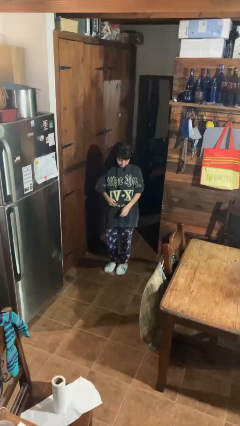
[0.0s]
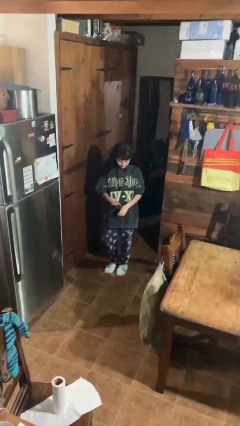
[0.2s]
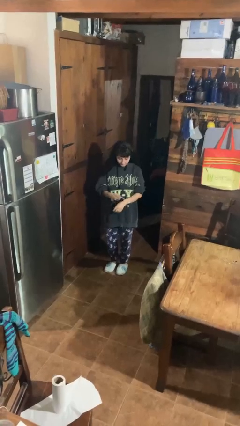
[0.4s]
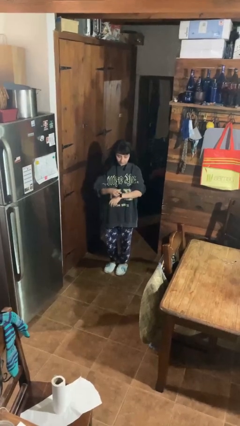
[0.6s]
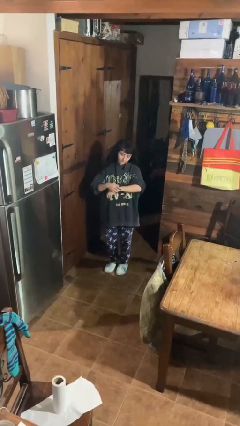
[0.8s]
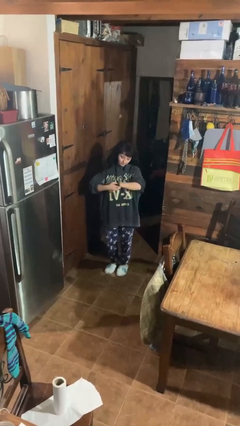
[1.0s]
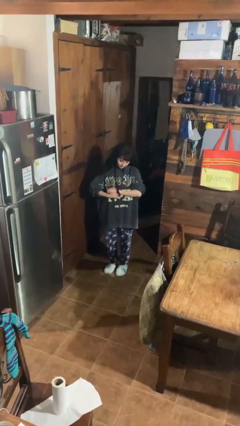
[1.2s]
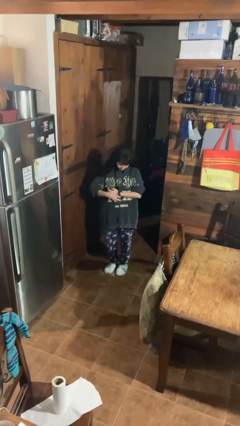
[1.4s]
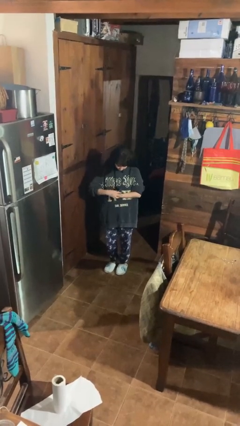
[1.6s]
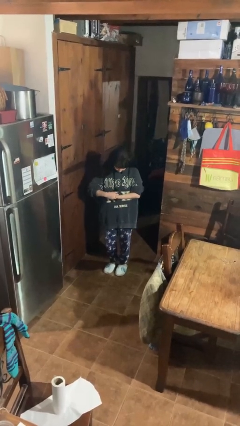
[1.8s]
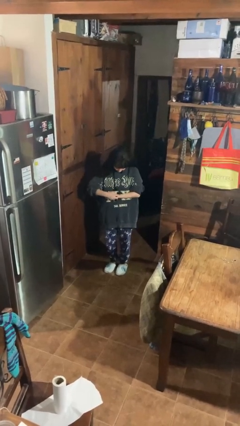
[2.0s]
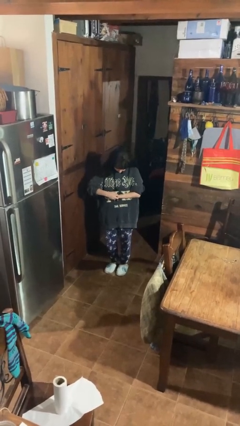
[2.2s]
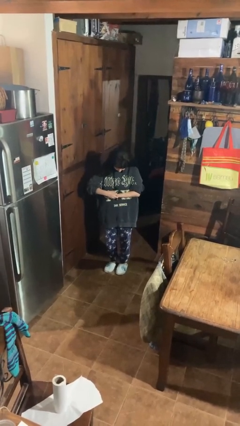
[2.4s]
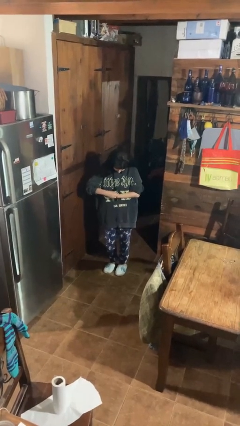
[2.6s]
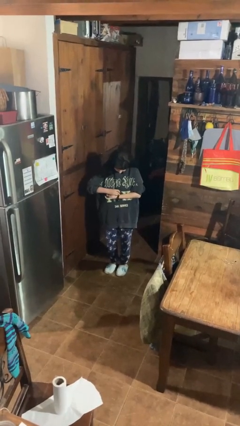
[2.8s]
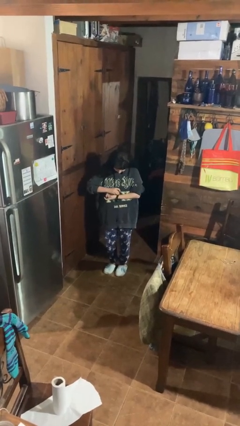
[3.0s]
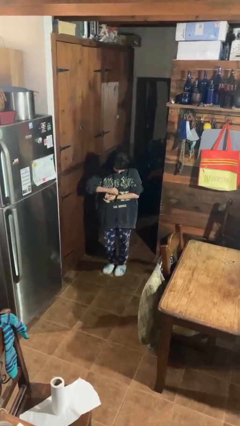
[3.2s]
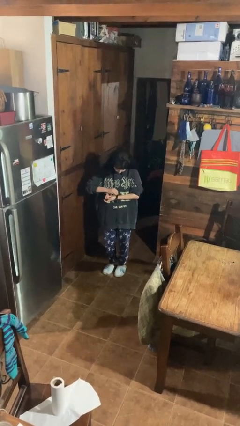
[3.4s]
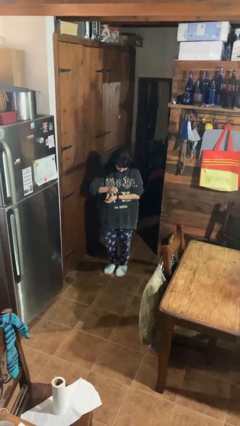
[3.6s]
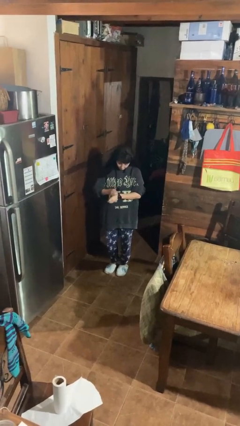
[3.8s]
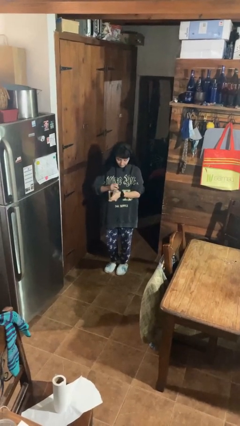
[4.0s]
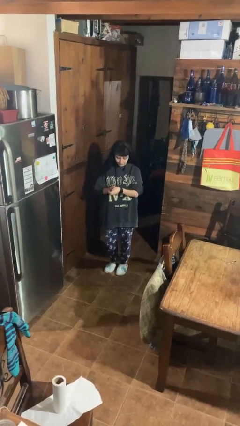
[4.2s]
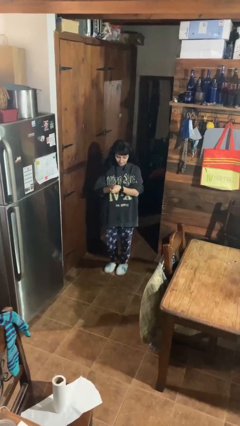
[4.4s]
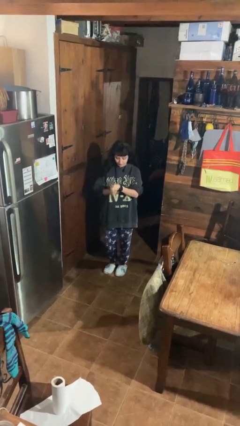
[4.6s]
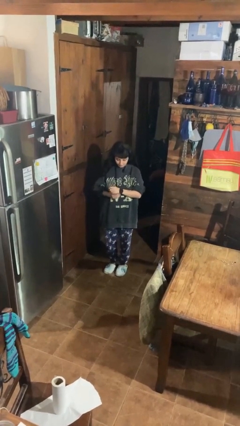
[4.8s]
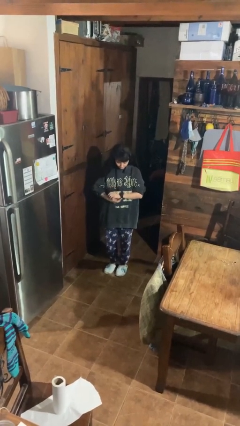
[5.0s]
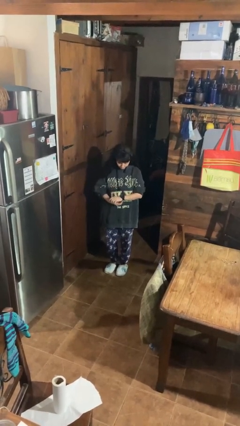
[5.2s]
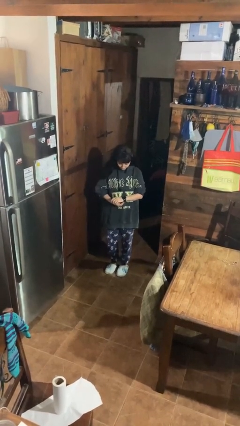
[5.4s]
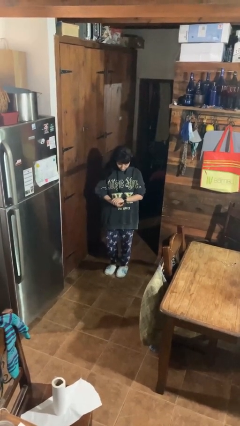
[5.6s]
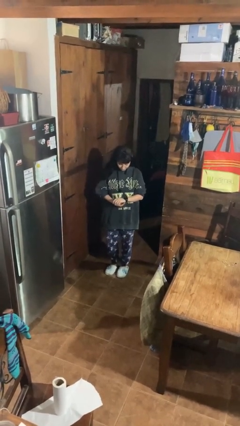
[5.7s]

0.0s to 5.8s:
person puts on wristwatch

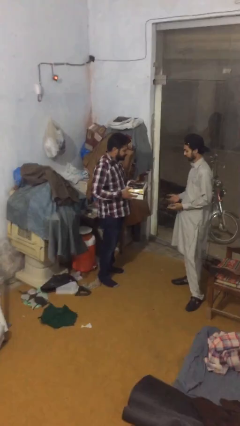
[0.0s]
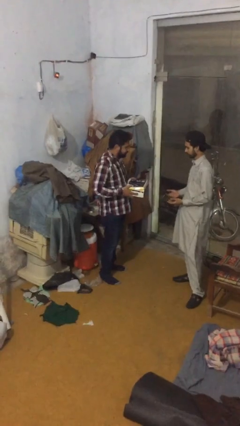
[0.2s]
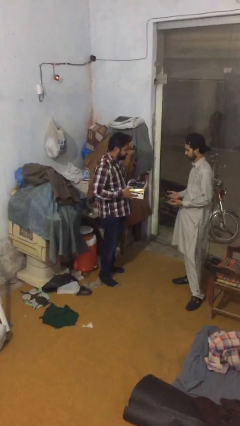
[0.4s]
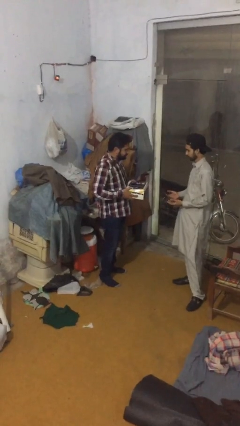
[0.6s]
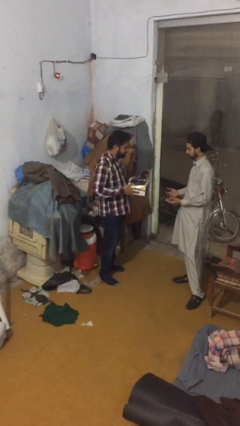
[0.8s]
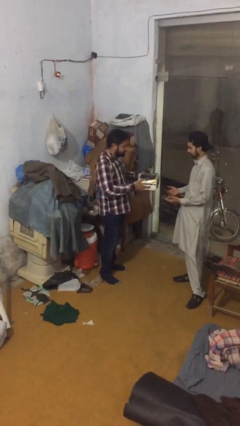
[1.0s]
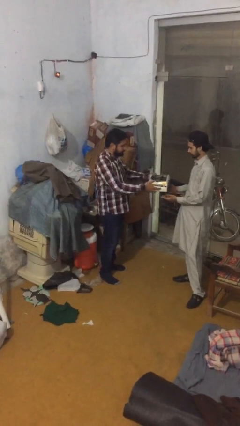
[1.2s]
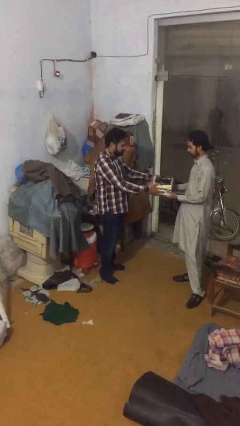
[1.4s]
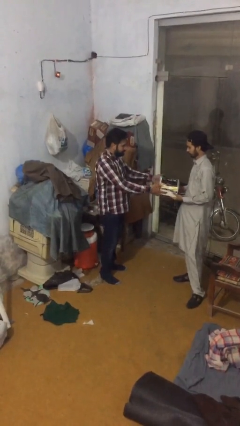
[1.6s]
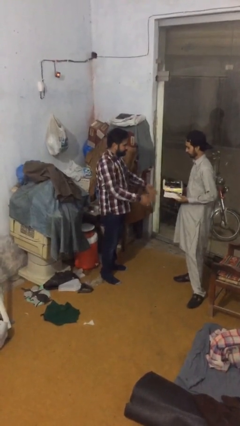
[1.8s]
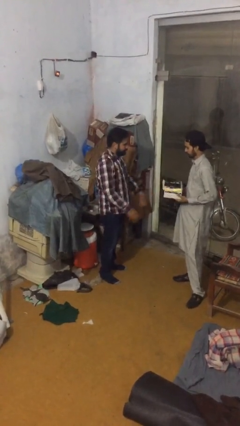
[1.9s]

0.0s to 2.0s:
person transfers object to person

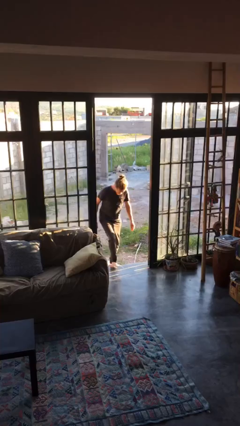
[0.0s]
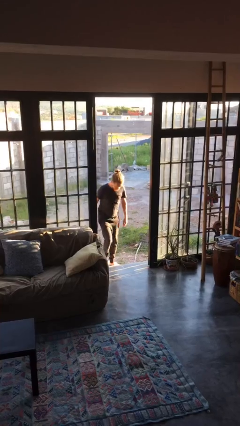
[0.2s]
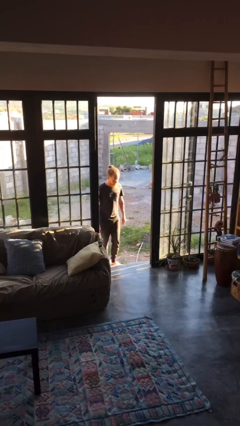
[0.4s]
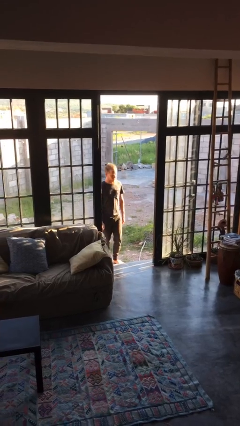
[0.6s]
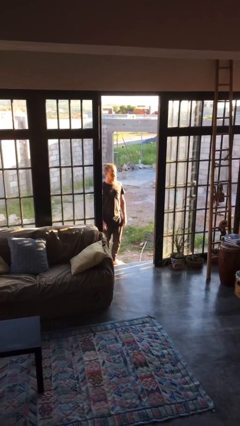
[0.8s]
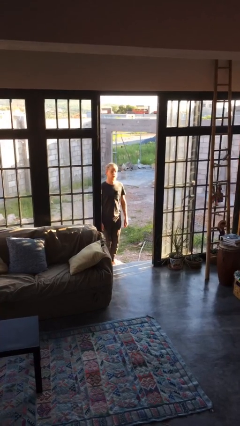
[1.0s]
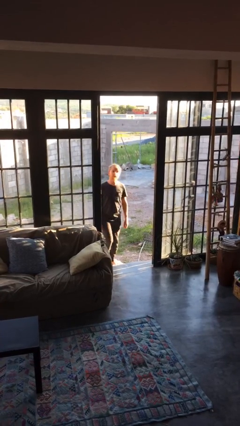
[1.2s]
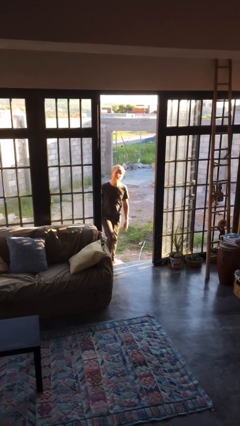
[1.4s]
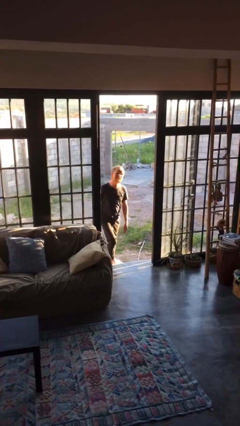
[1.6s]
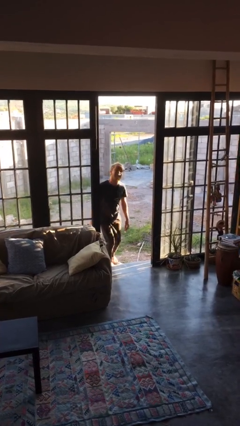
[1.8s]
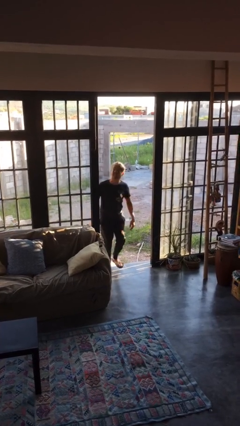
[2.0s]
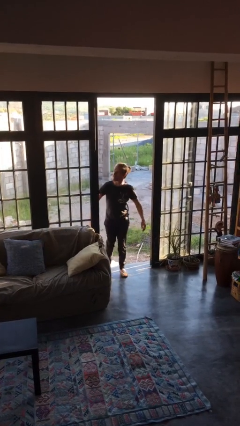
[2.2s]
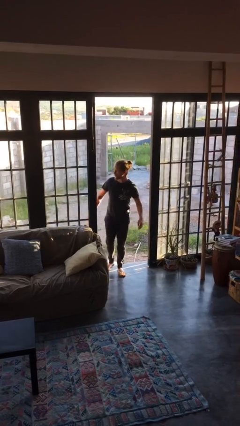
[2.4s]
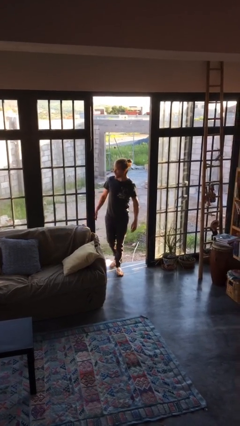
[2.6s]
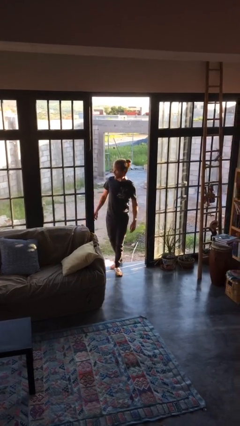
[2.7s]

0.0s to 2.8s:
person bumps into wall

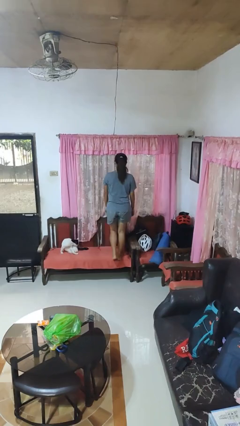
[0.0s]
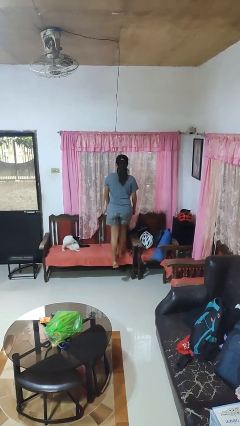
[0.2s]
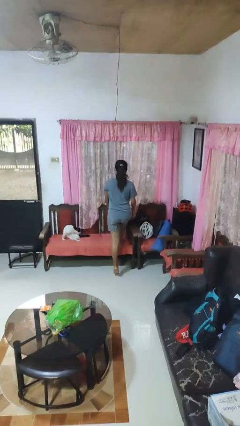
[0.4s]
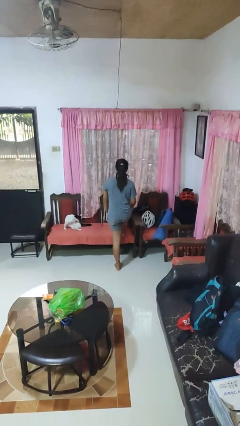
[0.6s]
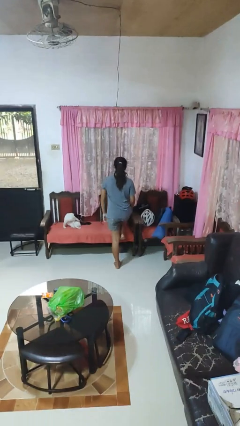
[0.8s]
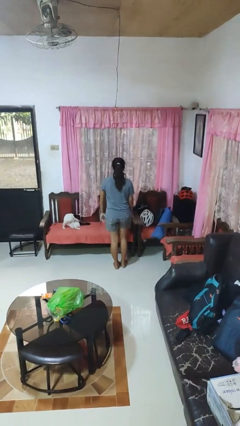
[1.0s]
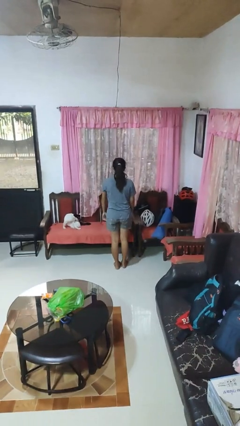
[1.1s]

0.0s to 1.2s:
person climbs off chair

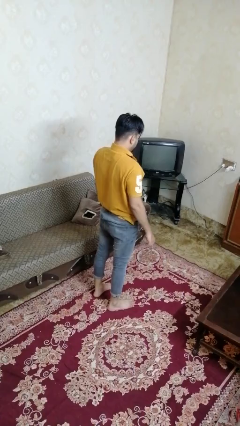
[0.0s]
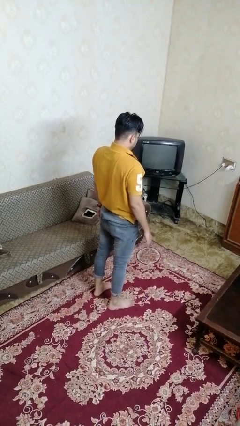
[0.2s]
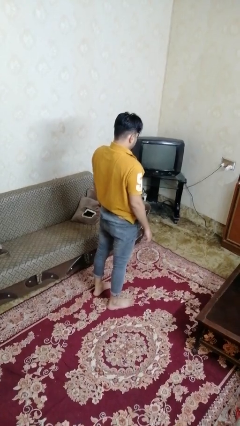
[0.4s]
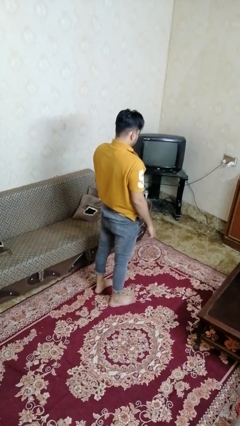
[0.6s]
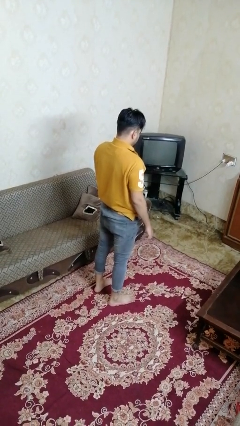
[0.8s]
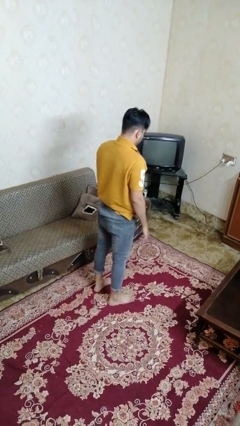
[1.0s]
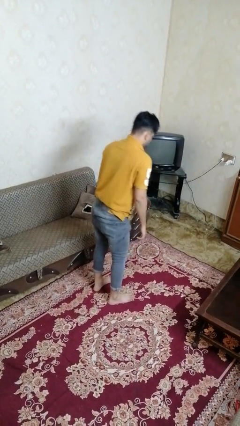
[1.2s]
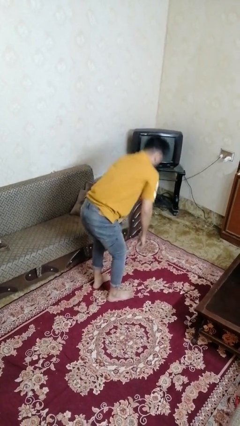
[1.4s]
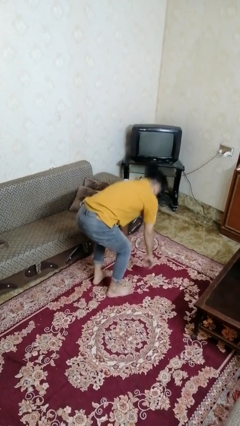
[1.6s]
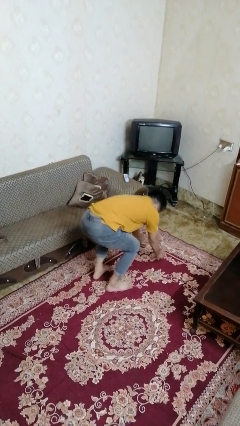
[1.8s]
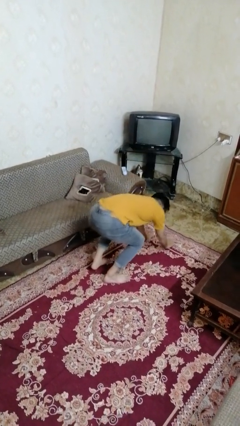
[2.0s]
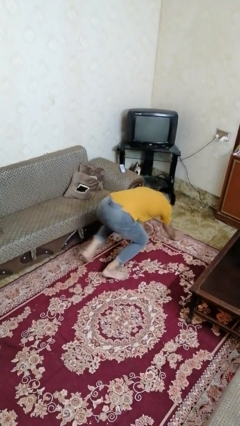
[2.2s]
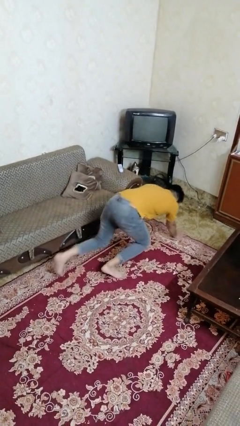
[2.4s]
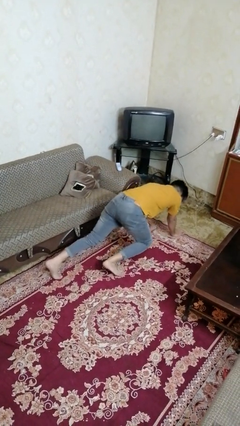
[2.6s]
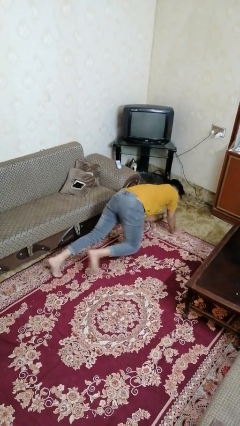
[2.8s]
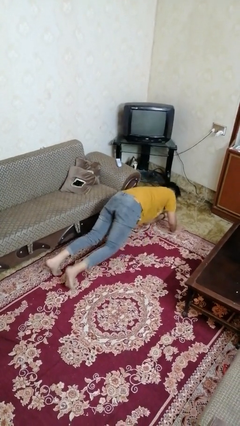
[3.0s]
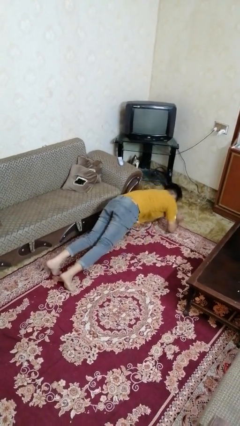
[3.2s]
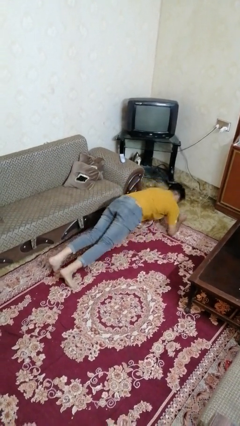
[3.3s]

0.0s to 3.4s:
person exercises with plank

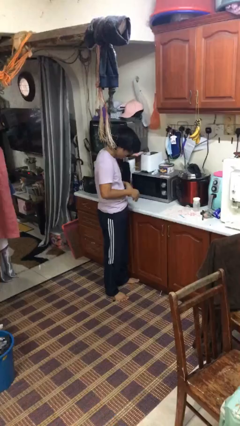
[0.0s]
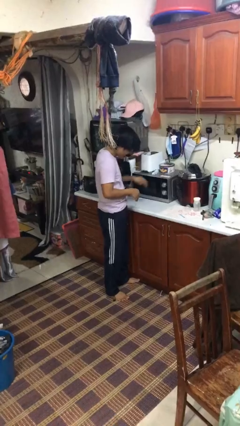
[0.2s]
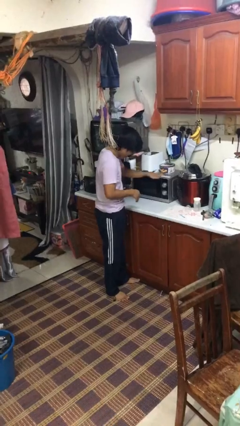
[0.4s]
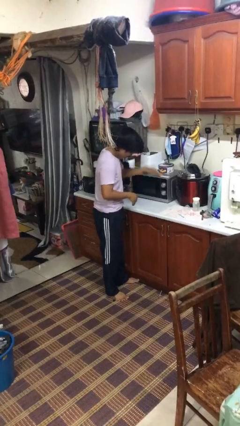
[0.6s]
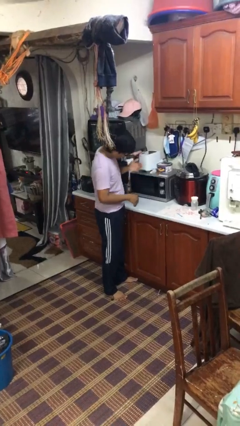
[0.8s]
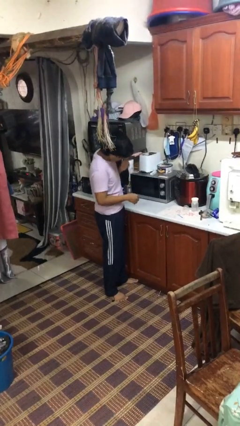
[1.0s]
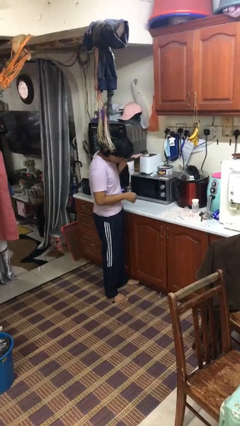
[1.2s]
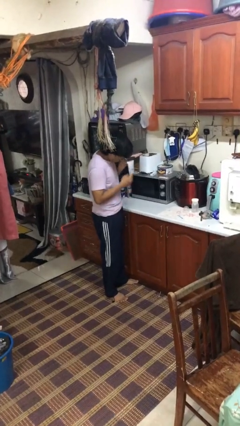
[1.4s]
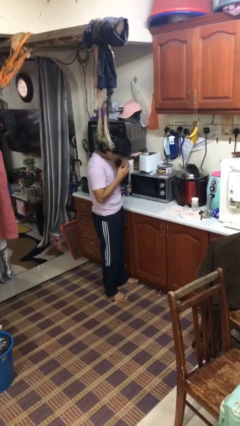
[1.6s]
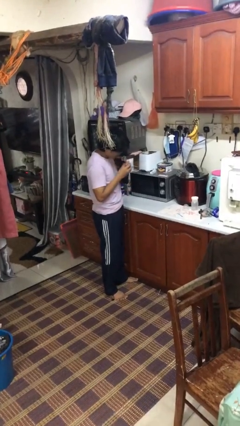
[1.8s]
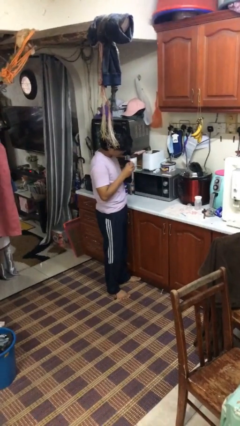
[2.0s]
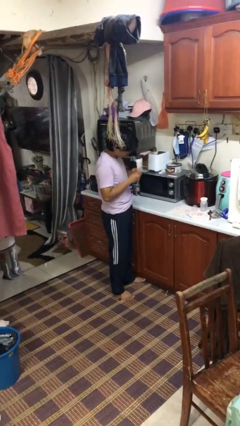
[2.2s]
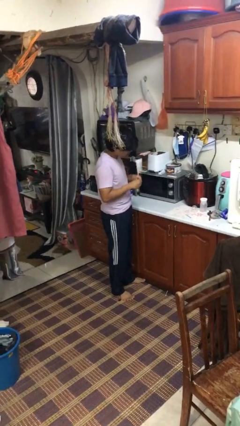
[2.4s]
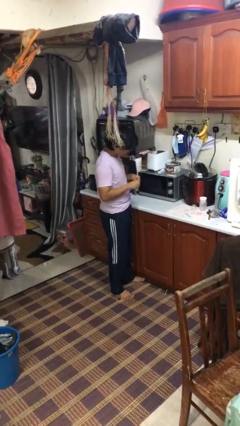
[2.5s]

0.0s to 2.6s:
person burns hand
